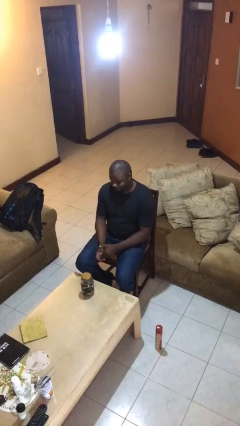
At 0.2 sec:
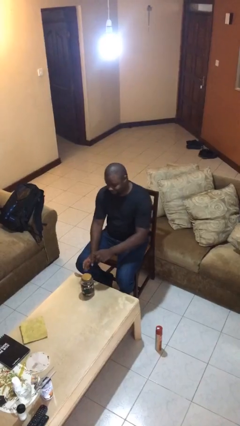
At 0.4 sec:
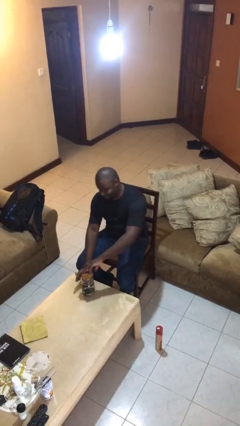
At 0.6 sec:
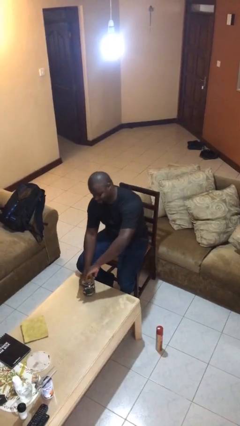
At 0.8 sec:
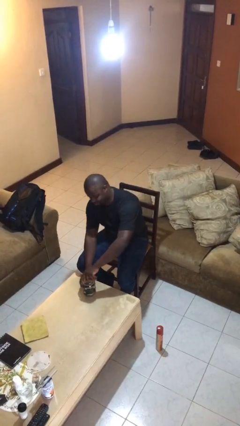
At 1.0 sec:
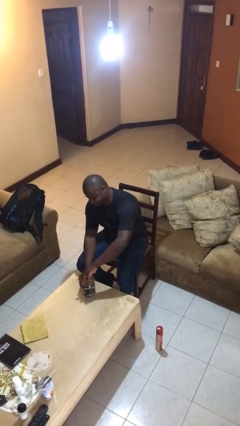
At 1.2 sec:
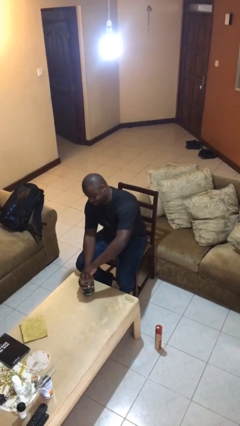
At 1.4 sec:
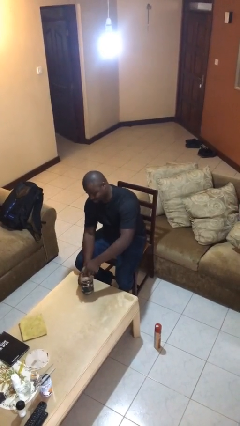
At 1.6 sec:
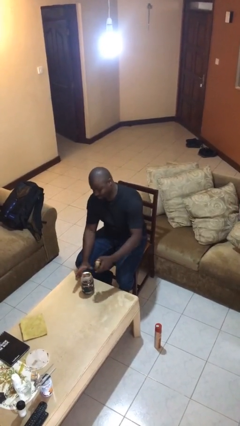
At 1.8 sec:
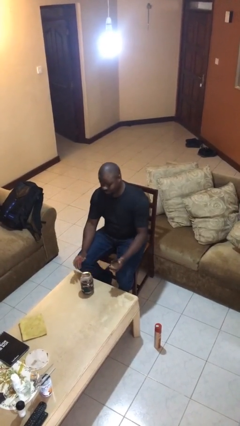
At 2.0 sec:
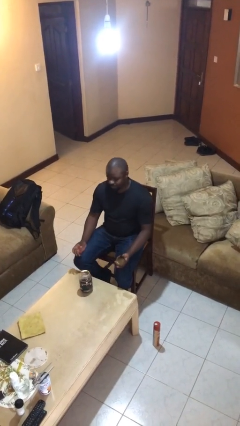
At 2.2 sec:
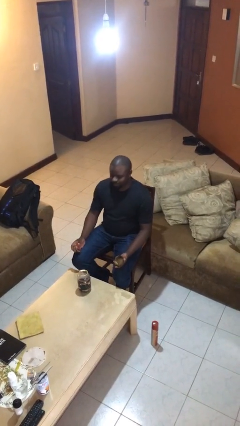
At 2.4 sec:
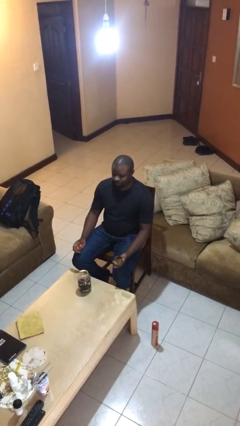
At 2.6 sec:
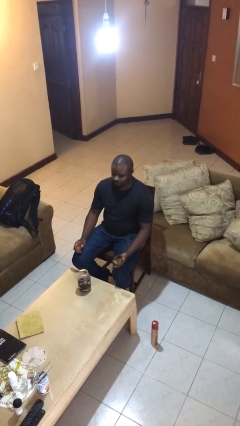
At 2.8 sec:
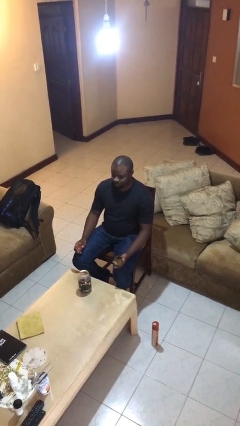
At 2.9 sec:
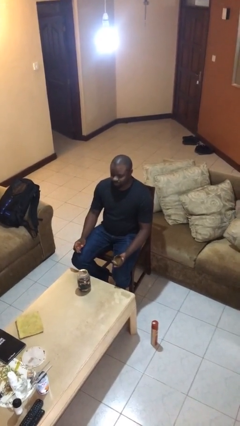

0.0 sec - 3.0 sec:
person opens jar

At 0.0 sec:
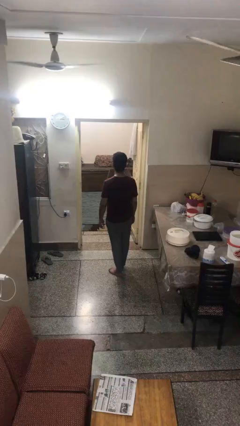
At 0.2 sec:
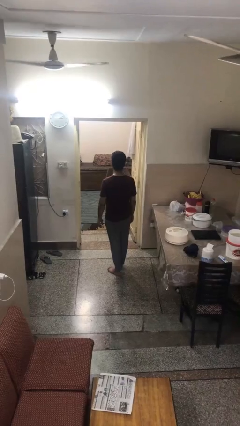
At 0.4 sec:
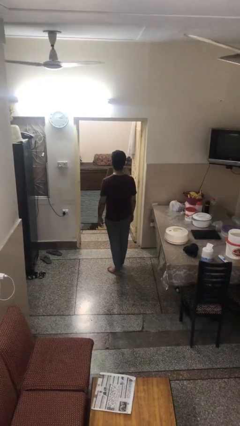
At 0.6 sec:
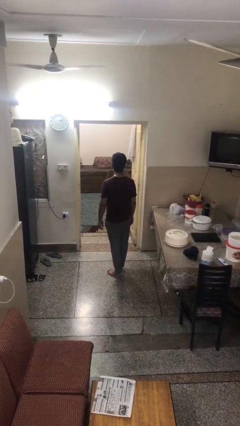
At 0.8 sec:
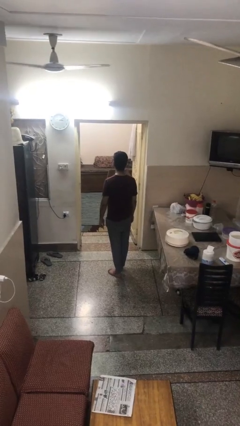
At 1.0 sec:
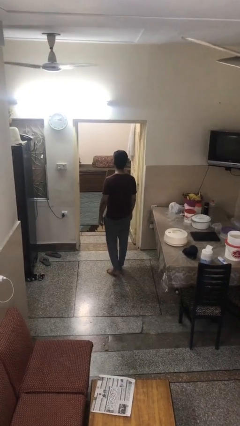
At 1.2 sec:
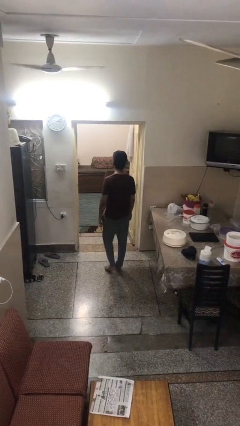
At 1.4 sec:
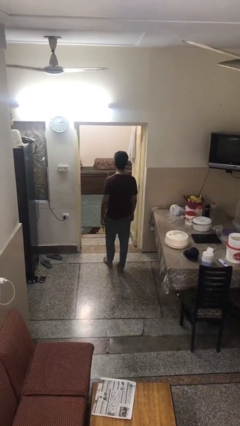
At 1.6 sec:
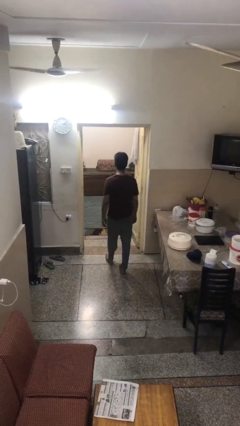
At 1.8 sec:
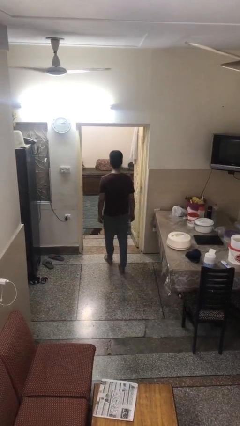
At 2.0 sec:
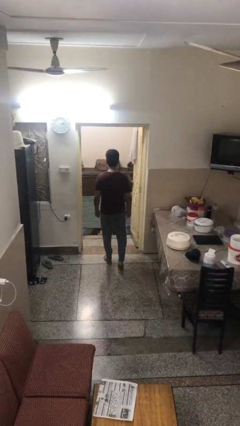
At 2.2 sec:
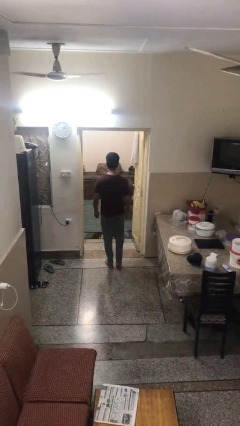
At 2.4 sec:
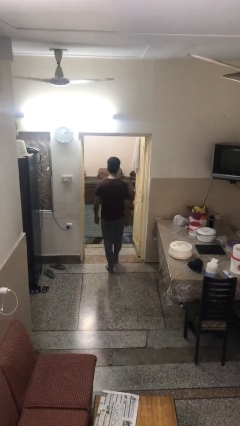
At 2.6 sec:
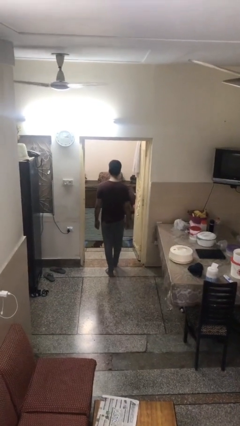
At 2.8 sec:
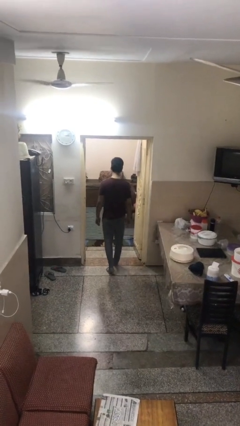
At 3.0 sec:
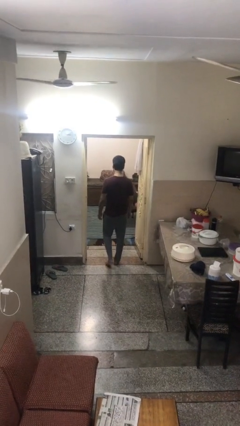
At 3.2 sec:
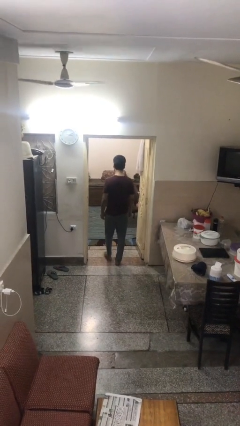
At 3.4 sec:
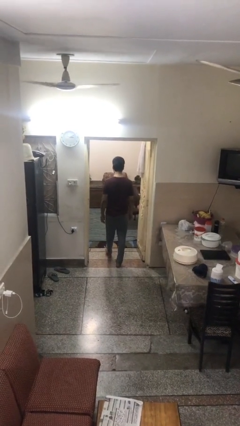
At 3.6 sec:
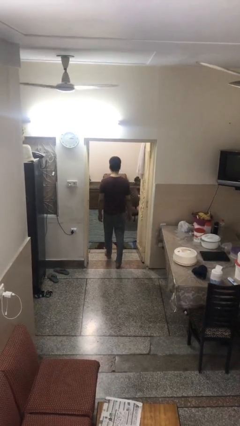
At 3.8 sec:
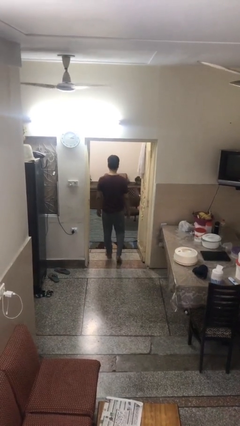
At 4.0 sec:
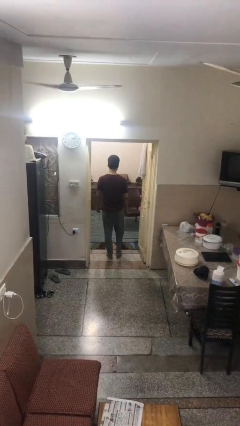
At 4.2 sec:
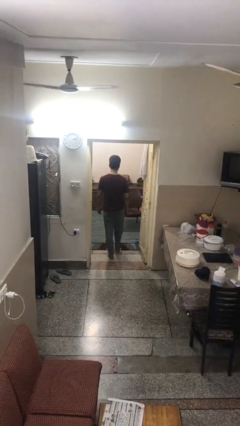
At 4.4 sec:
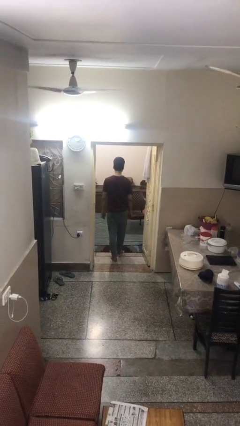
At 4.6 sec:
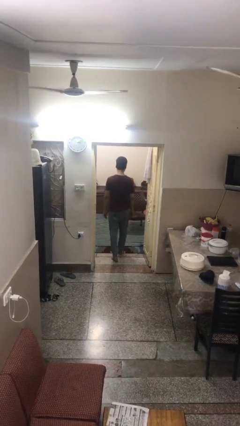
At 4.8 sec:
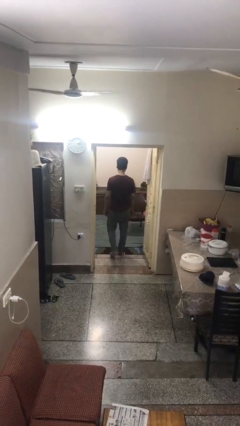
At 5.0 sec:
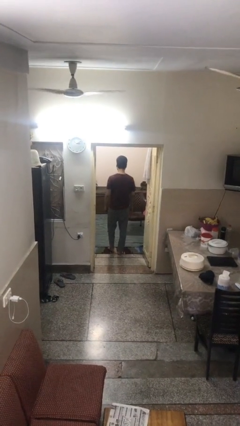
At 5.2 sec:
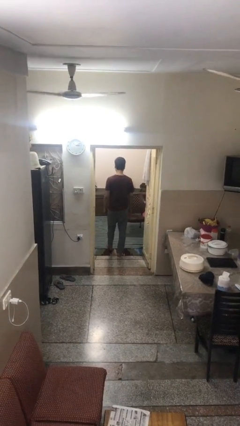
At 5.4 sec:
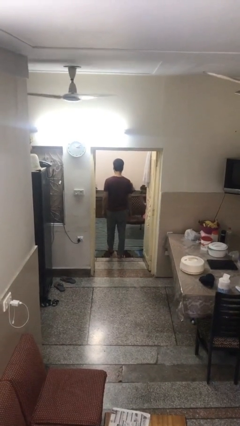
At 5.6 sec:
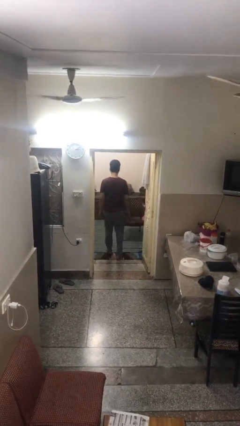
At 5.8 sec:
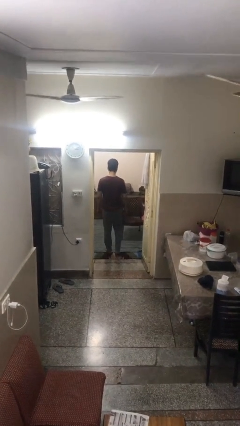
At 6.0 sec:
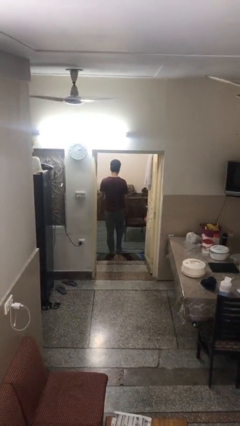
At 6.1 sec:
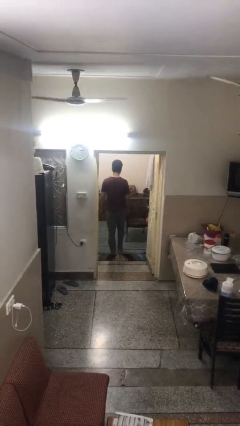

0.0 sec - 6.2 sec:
person exits scene through structure

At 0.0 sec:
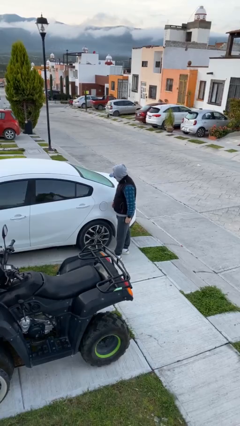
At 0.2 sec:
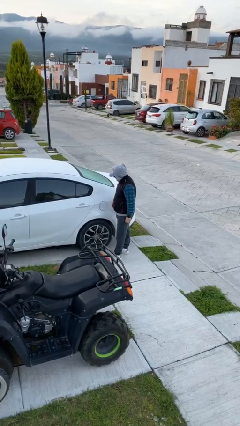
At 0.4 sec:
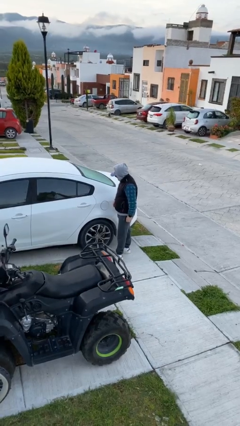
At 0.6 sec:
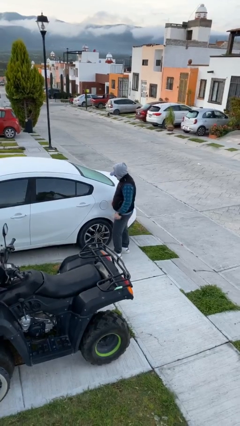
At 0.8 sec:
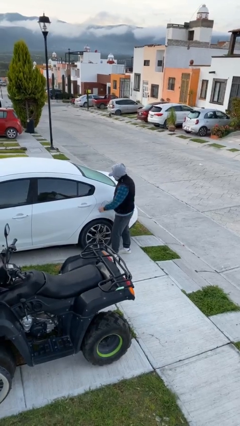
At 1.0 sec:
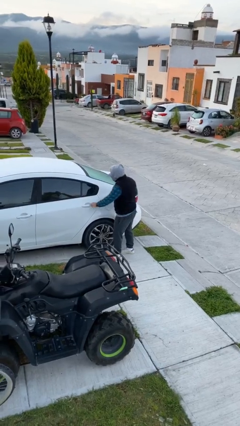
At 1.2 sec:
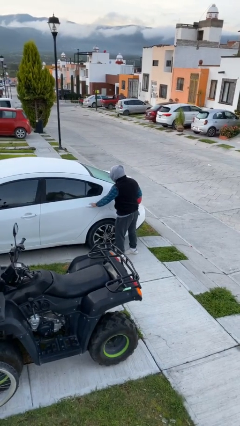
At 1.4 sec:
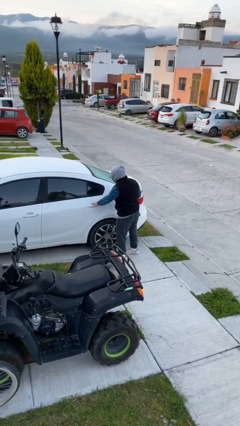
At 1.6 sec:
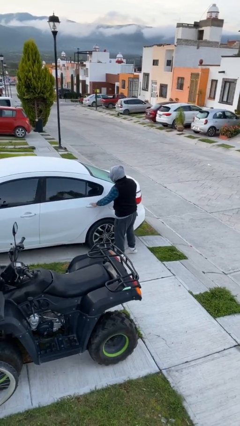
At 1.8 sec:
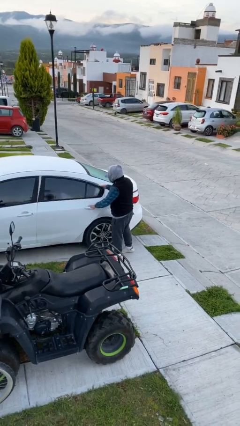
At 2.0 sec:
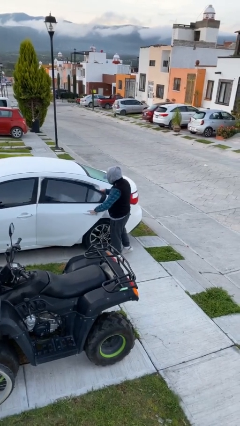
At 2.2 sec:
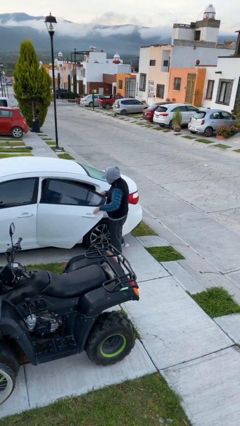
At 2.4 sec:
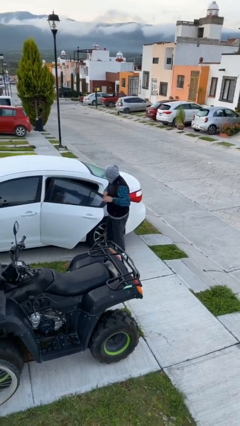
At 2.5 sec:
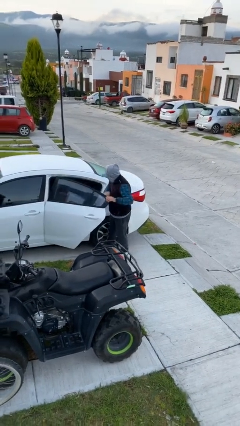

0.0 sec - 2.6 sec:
person opens car door

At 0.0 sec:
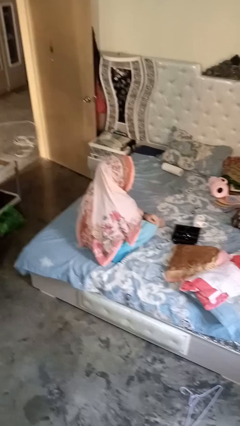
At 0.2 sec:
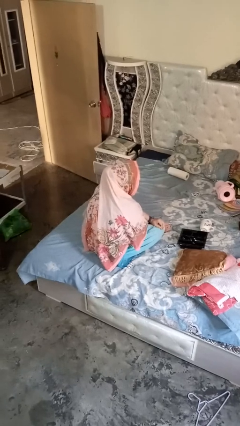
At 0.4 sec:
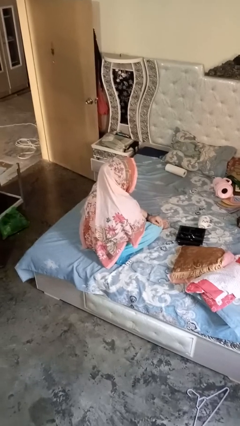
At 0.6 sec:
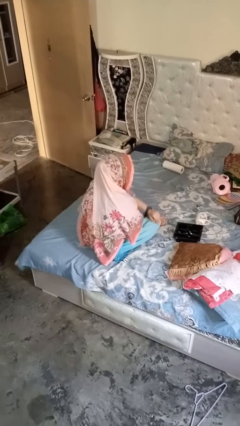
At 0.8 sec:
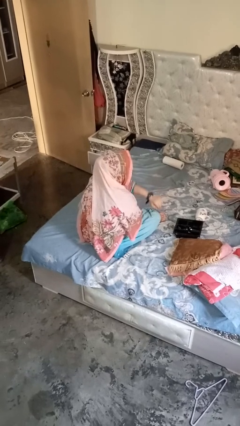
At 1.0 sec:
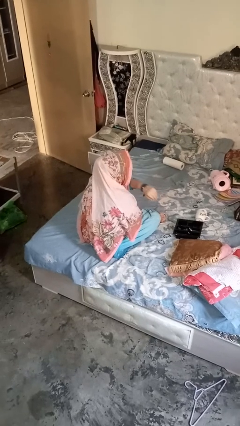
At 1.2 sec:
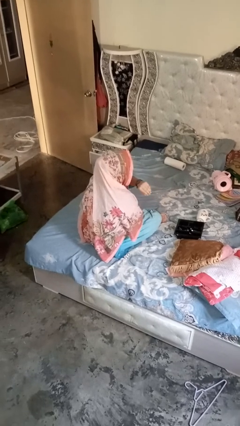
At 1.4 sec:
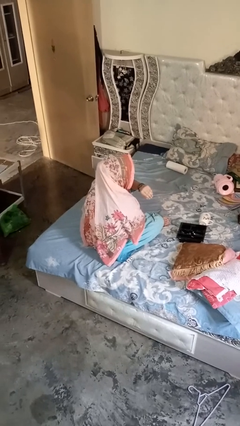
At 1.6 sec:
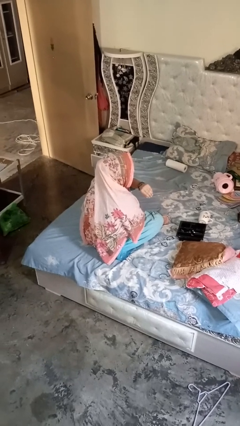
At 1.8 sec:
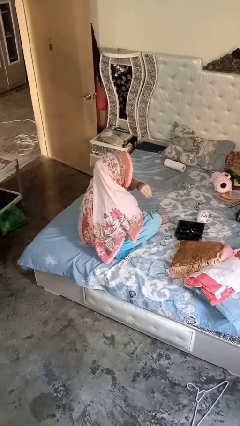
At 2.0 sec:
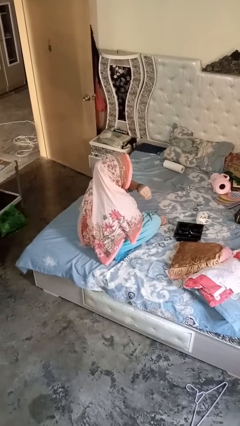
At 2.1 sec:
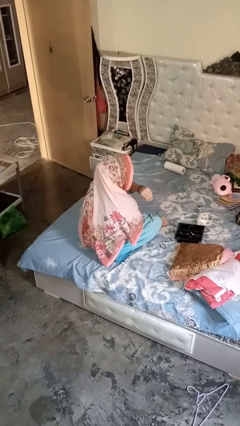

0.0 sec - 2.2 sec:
person gestures watch closely

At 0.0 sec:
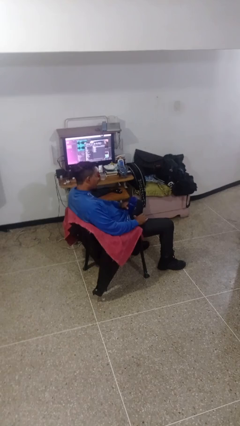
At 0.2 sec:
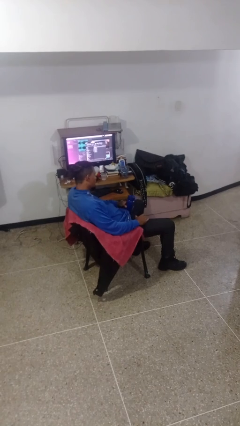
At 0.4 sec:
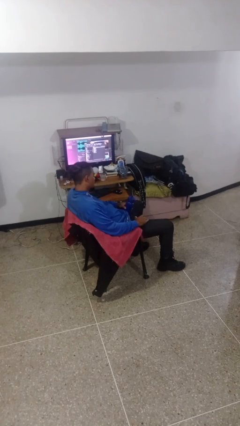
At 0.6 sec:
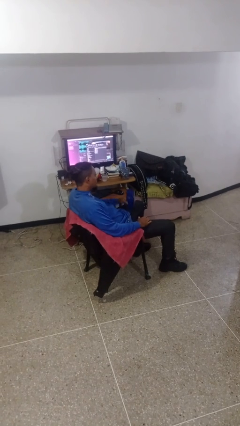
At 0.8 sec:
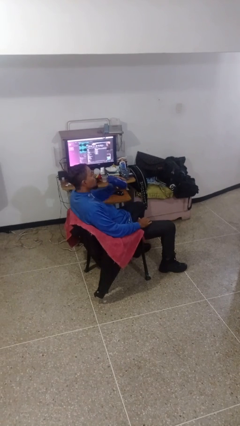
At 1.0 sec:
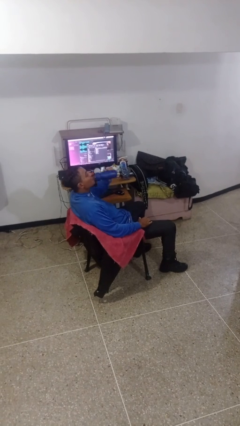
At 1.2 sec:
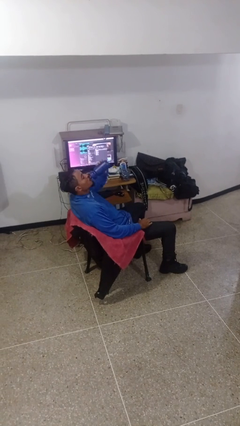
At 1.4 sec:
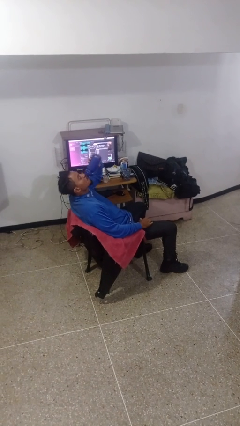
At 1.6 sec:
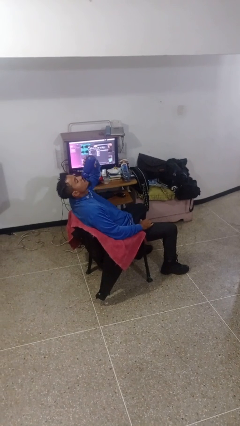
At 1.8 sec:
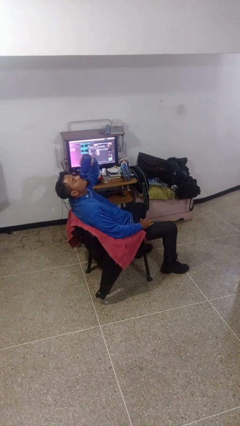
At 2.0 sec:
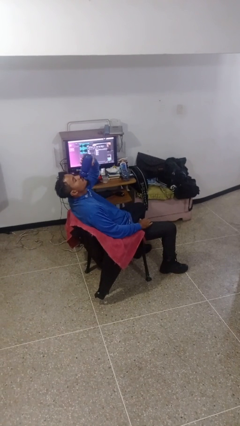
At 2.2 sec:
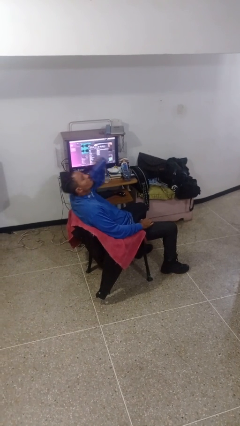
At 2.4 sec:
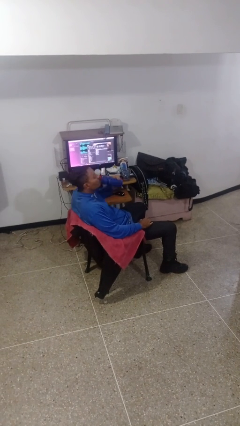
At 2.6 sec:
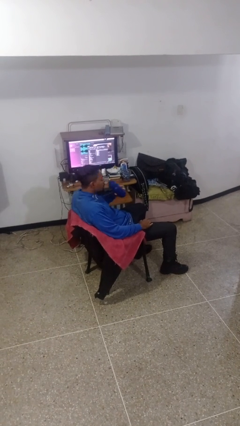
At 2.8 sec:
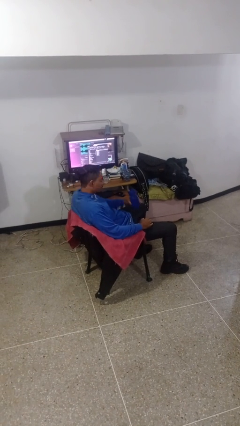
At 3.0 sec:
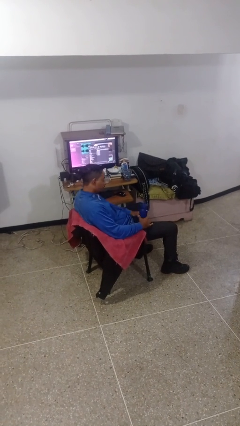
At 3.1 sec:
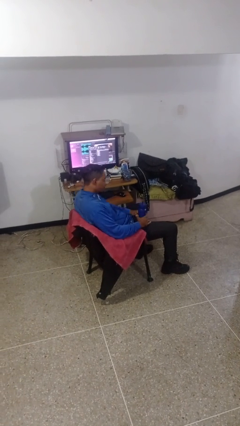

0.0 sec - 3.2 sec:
person drinks from bottle
